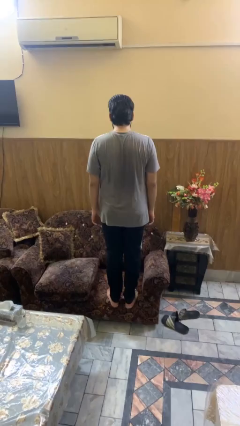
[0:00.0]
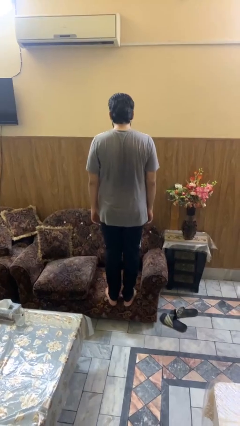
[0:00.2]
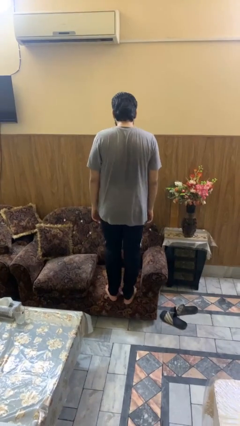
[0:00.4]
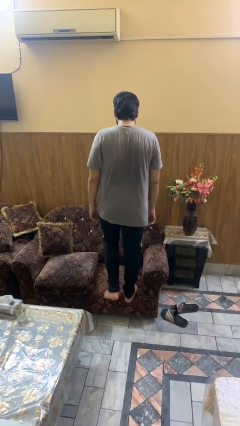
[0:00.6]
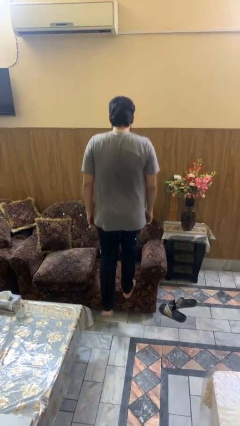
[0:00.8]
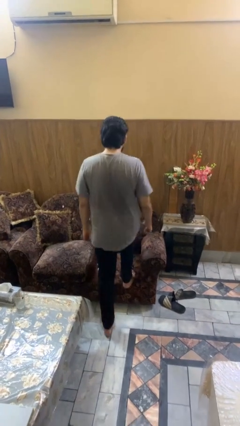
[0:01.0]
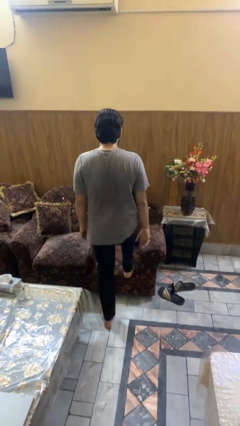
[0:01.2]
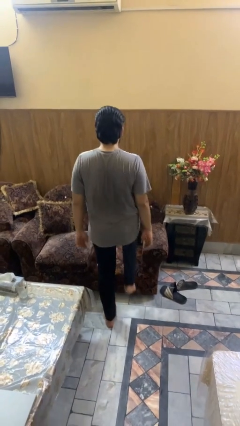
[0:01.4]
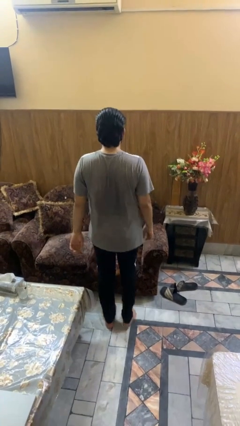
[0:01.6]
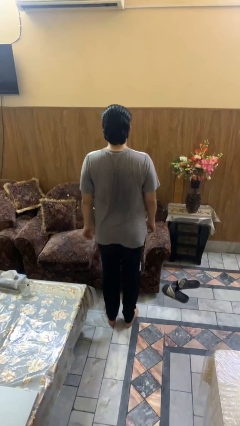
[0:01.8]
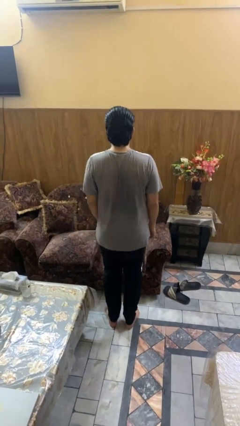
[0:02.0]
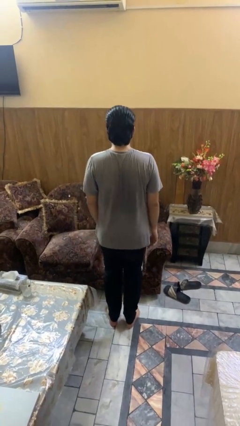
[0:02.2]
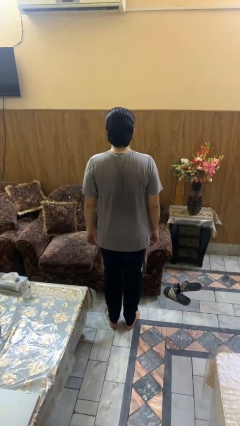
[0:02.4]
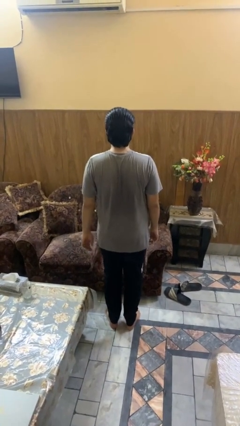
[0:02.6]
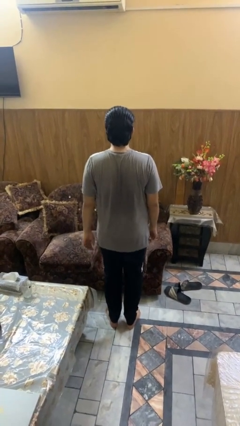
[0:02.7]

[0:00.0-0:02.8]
person climbs off couch

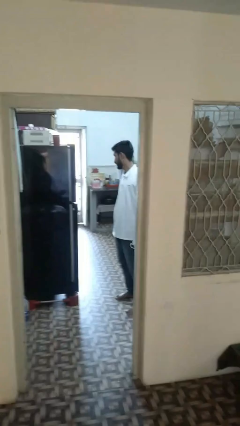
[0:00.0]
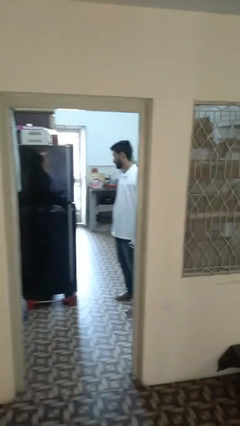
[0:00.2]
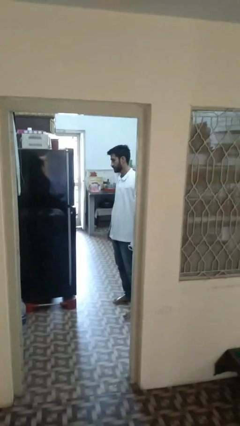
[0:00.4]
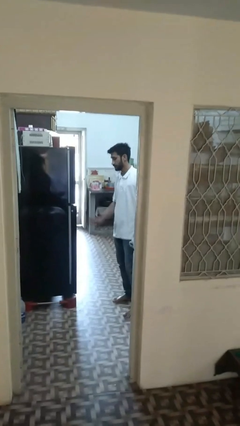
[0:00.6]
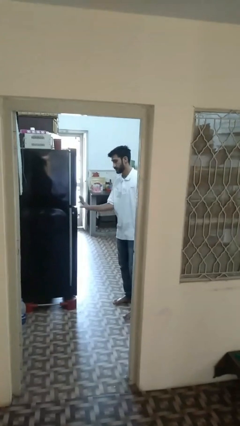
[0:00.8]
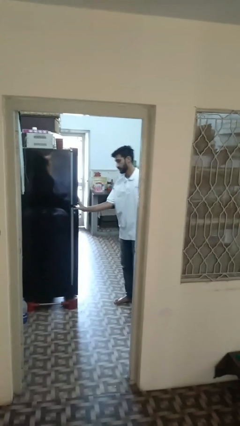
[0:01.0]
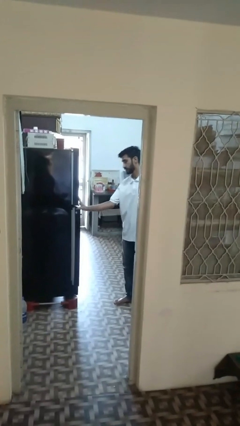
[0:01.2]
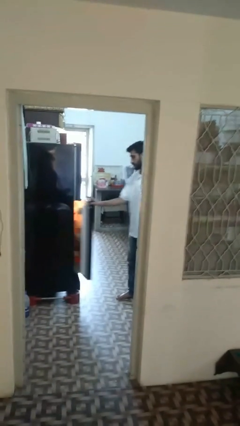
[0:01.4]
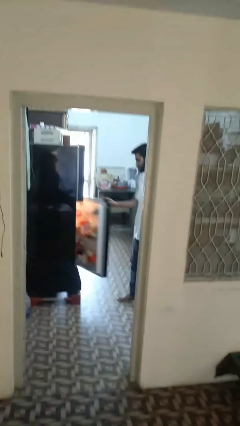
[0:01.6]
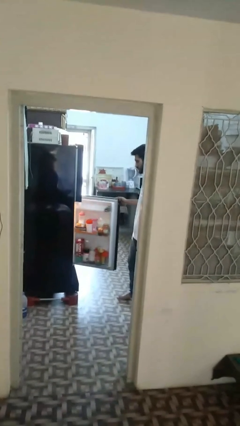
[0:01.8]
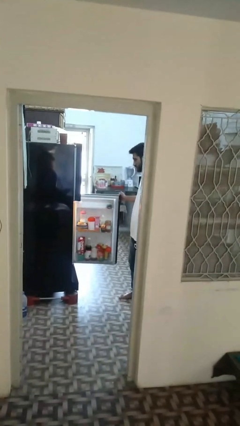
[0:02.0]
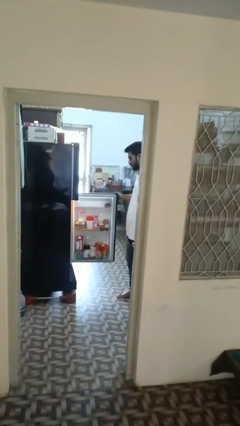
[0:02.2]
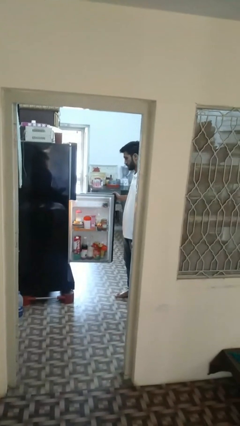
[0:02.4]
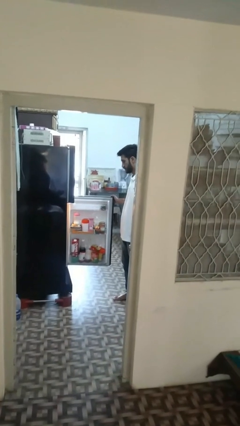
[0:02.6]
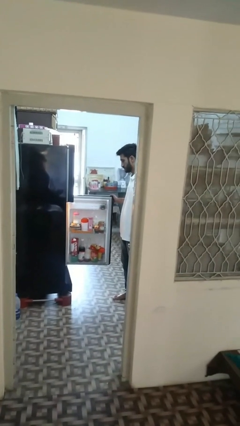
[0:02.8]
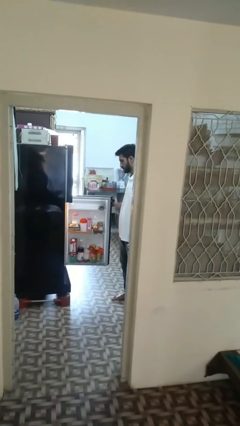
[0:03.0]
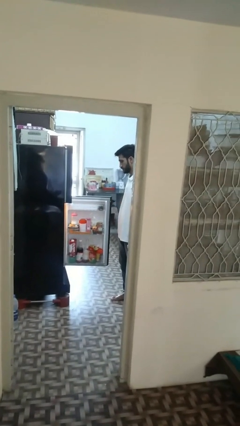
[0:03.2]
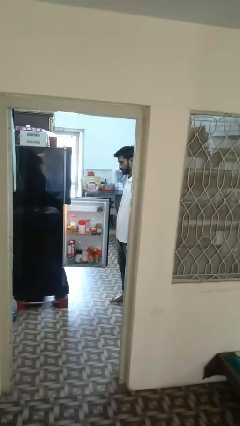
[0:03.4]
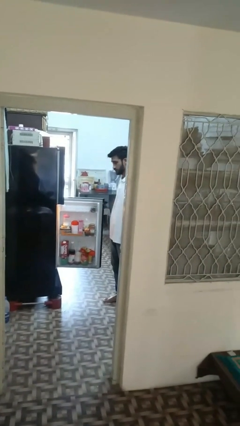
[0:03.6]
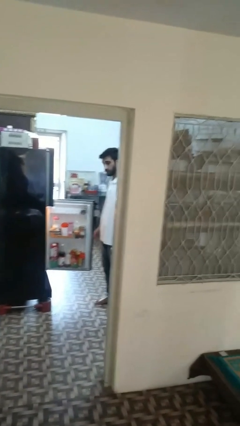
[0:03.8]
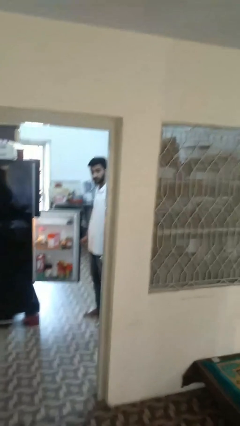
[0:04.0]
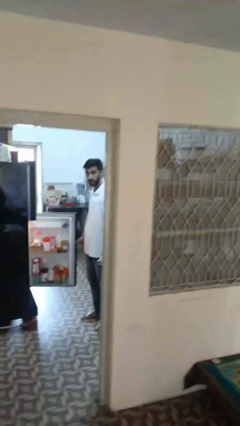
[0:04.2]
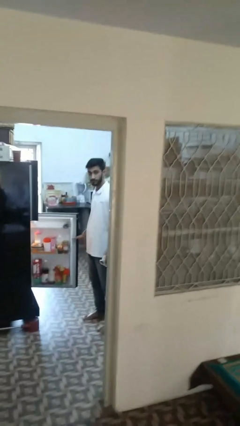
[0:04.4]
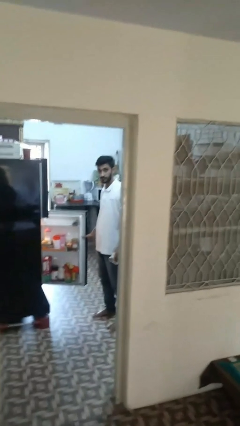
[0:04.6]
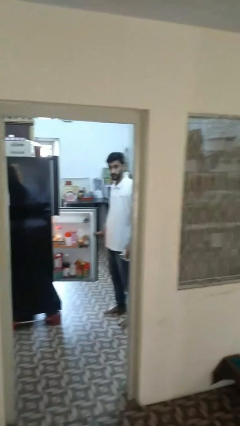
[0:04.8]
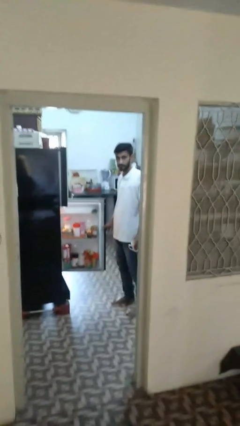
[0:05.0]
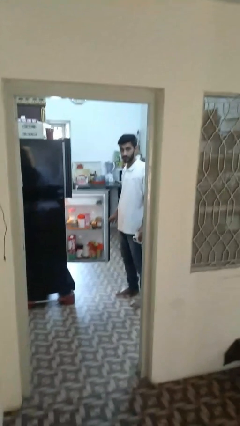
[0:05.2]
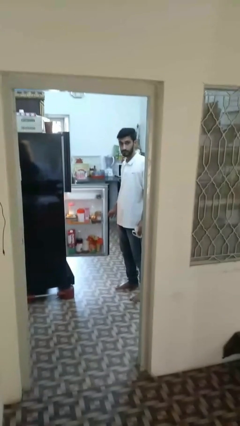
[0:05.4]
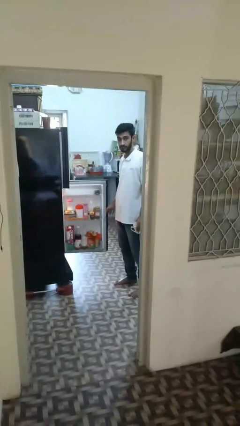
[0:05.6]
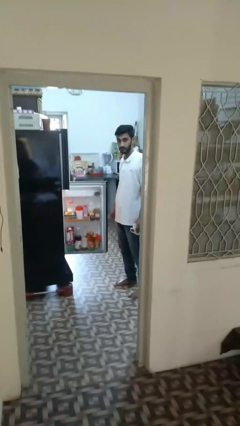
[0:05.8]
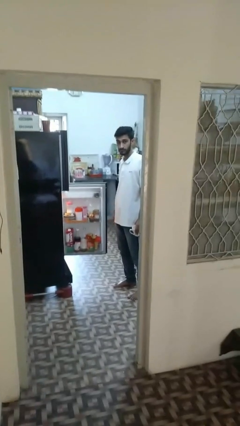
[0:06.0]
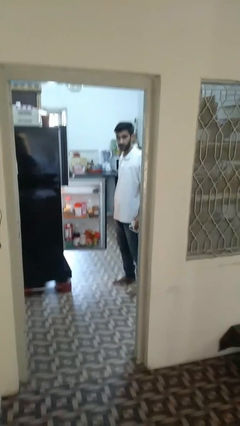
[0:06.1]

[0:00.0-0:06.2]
person opens refrigerator

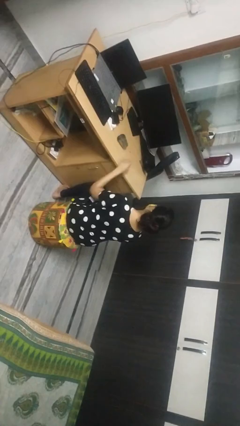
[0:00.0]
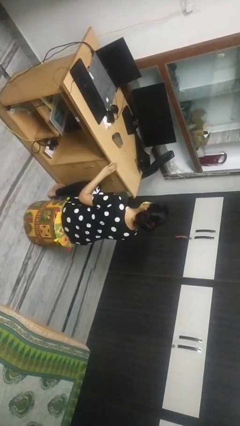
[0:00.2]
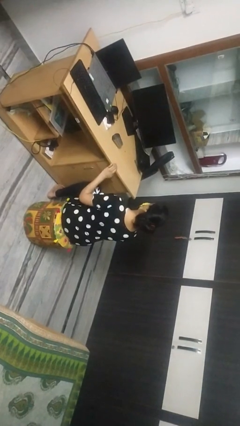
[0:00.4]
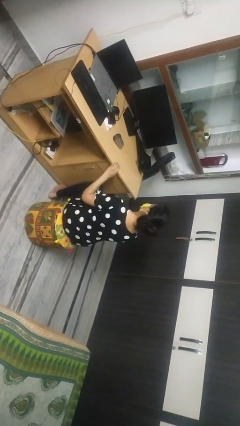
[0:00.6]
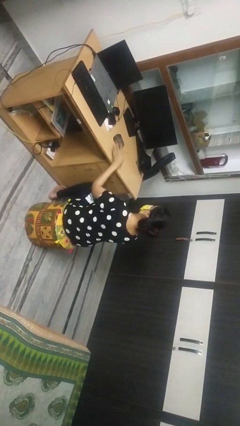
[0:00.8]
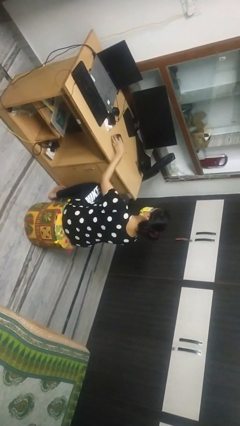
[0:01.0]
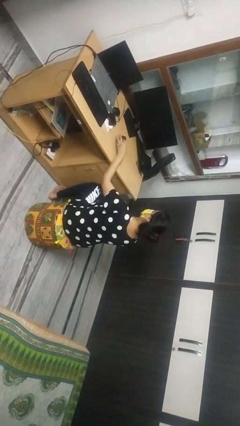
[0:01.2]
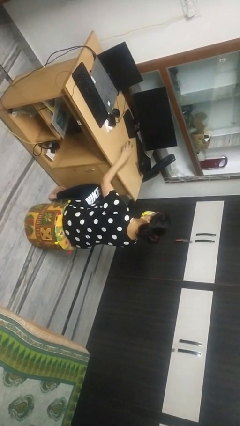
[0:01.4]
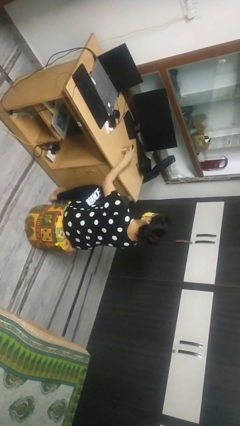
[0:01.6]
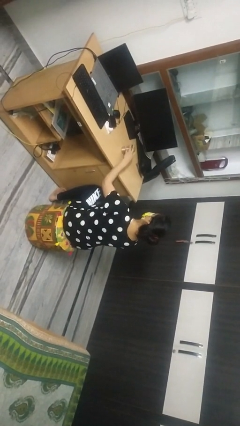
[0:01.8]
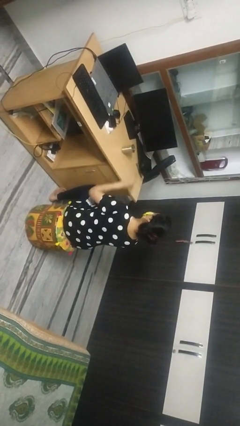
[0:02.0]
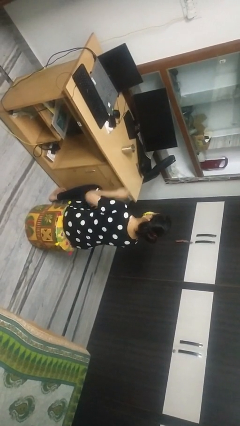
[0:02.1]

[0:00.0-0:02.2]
person sets upright glass

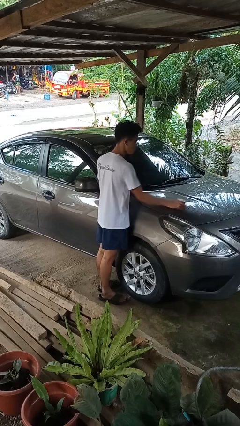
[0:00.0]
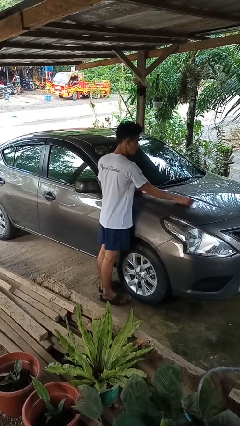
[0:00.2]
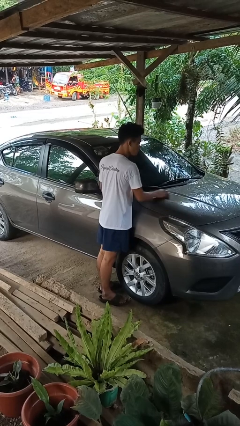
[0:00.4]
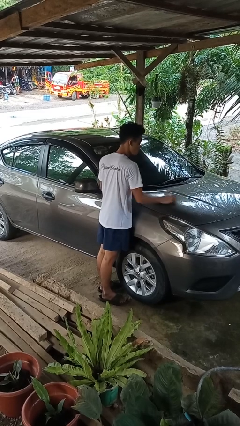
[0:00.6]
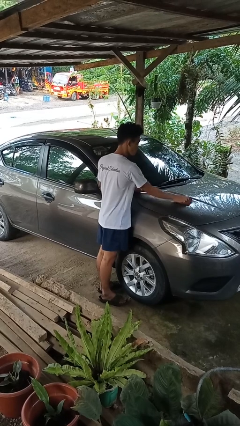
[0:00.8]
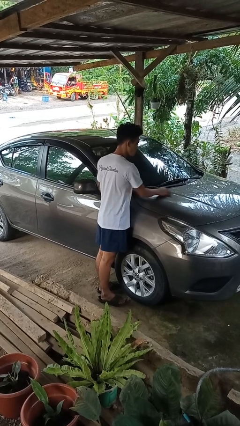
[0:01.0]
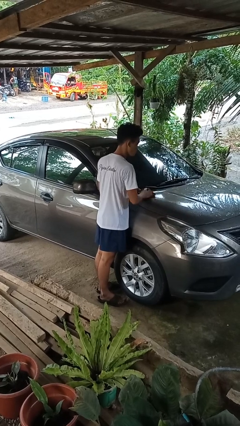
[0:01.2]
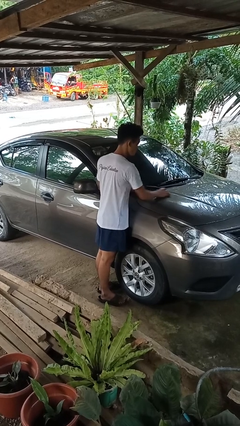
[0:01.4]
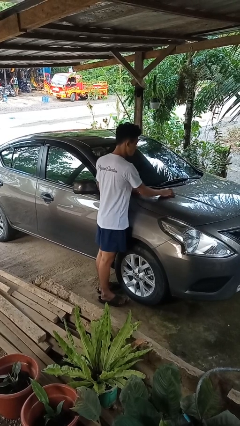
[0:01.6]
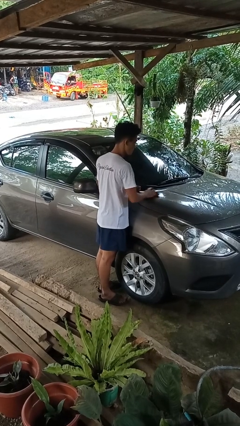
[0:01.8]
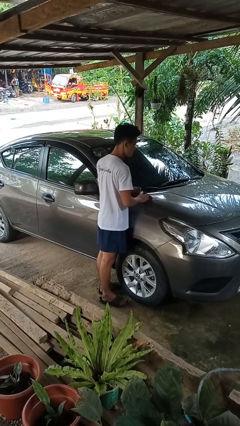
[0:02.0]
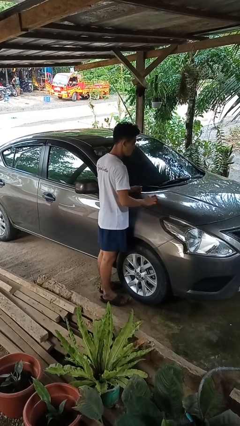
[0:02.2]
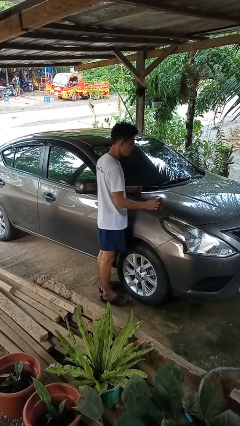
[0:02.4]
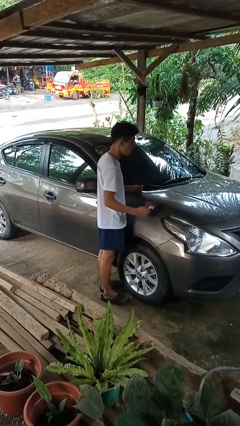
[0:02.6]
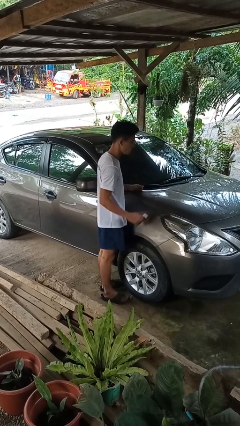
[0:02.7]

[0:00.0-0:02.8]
person polishes car with rag

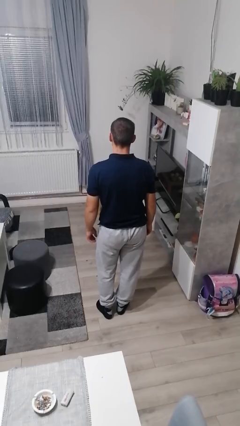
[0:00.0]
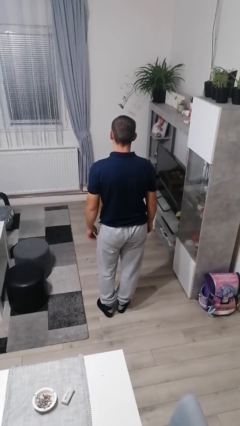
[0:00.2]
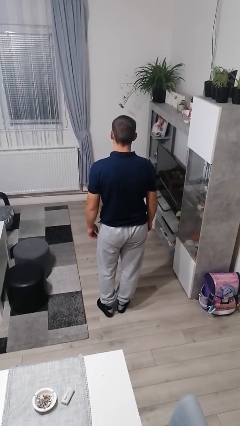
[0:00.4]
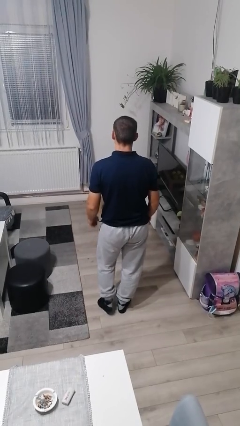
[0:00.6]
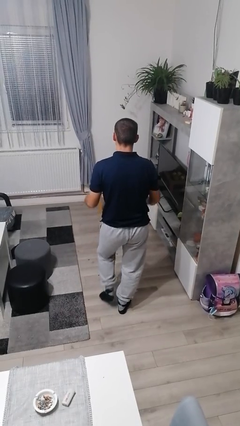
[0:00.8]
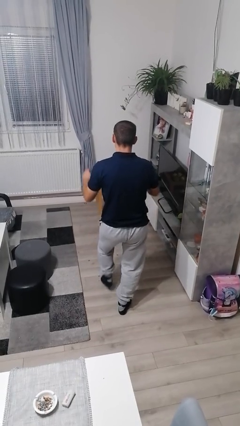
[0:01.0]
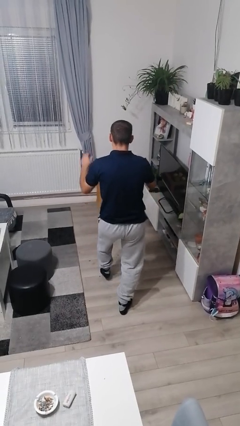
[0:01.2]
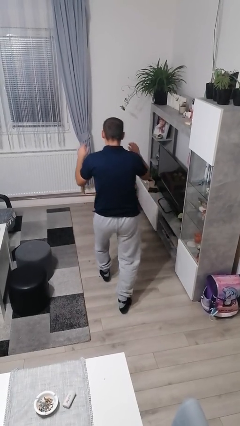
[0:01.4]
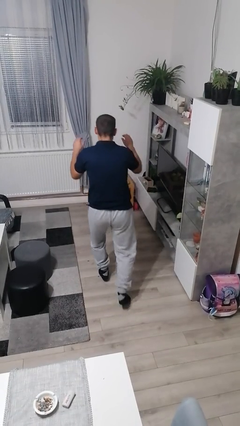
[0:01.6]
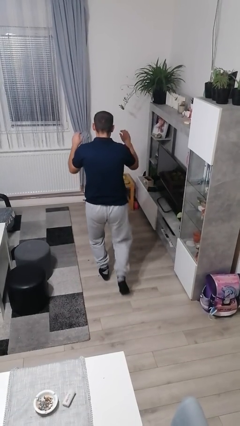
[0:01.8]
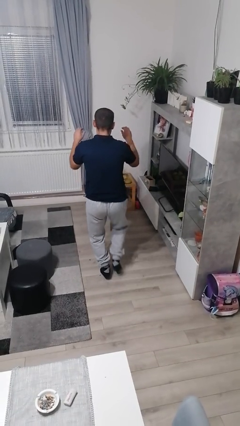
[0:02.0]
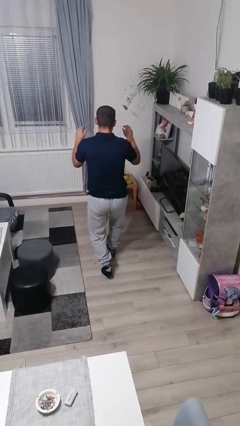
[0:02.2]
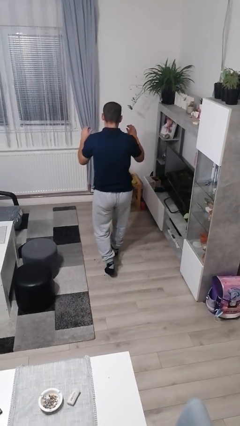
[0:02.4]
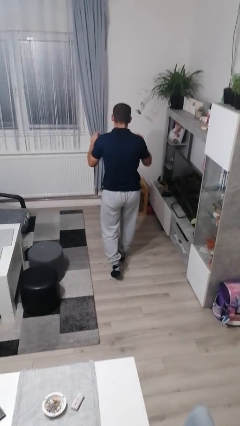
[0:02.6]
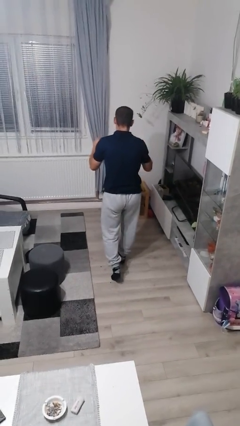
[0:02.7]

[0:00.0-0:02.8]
person walks tiptoe

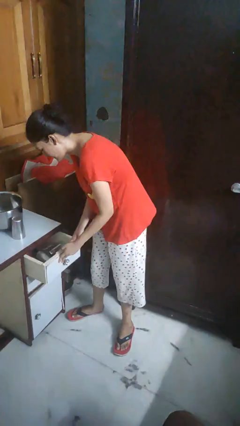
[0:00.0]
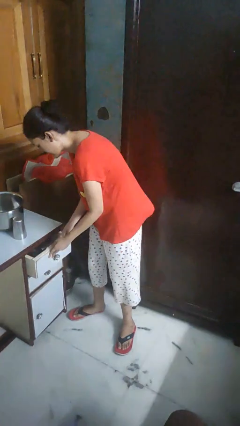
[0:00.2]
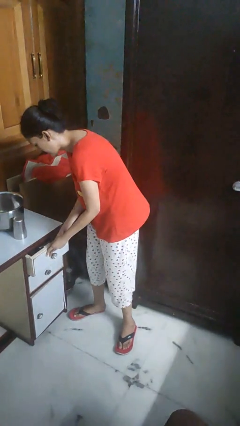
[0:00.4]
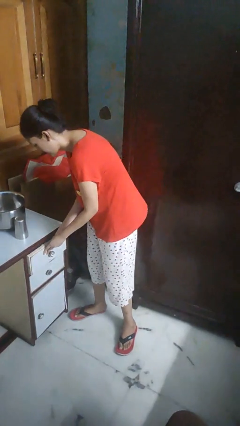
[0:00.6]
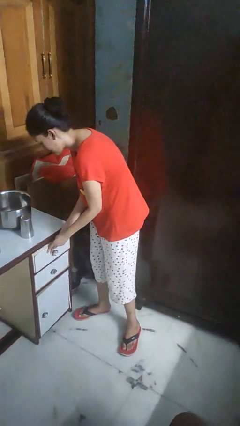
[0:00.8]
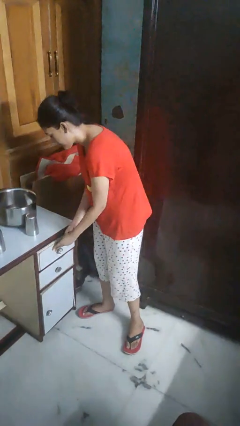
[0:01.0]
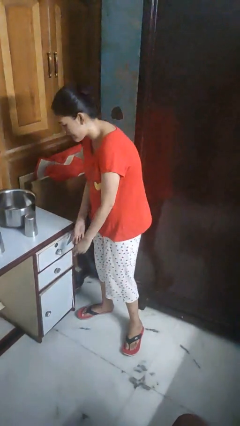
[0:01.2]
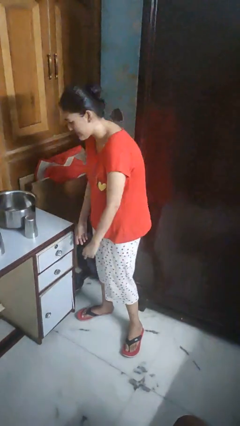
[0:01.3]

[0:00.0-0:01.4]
person closes kitchen drawer
